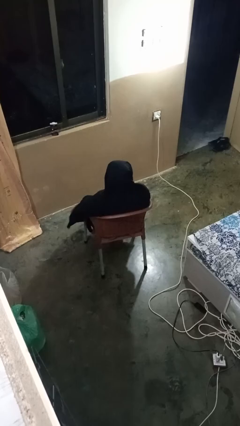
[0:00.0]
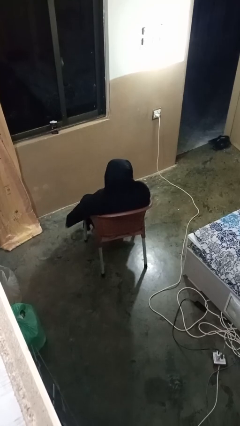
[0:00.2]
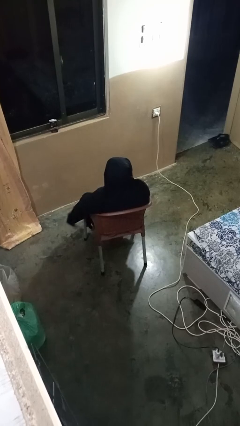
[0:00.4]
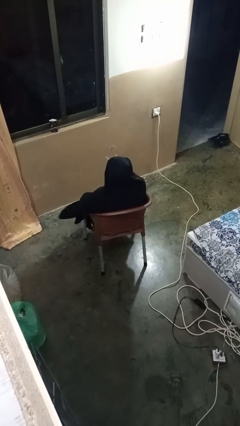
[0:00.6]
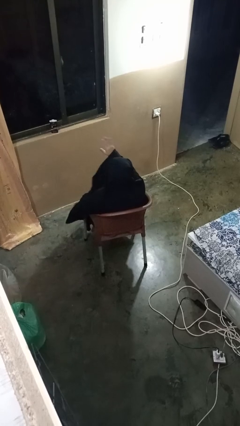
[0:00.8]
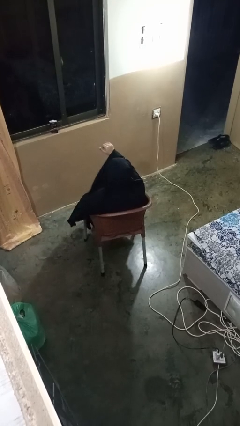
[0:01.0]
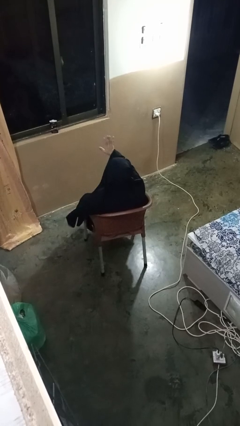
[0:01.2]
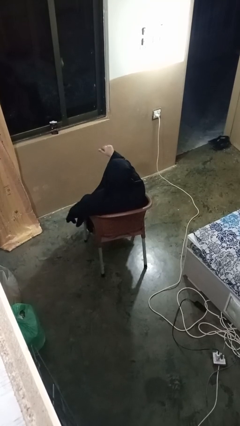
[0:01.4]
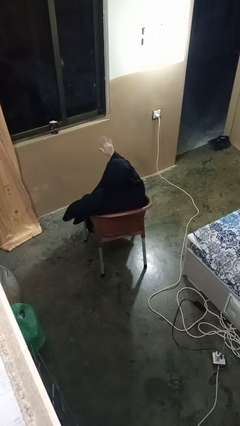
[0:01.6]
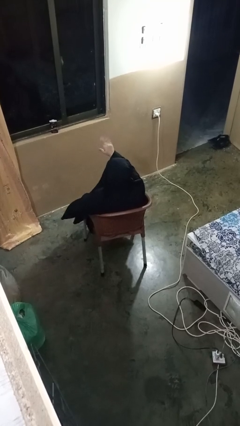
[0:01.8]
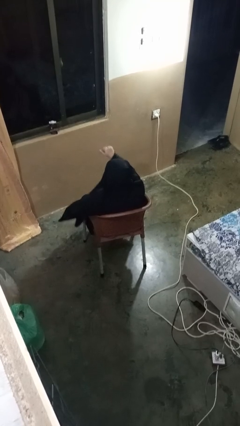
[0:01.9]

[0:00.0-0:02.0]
person gestures come here

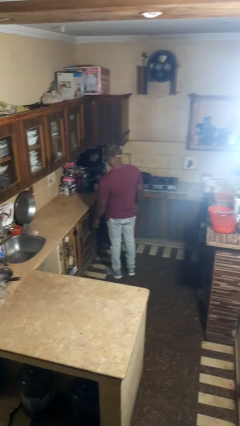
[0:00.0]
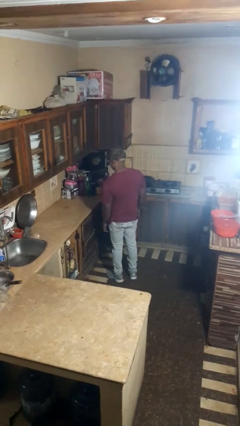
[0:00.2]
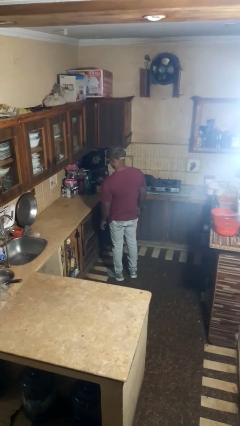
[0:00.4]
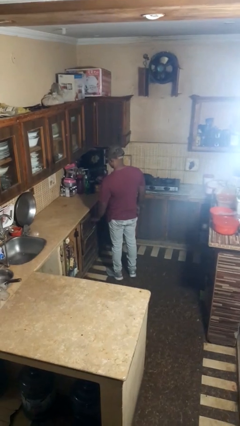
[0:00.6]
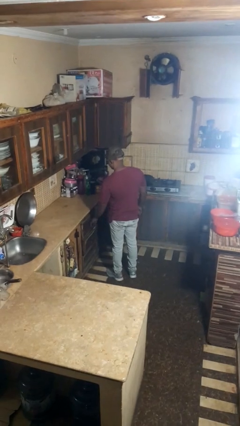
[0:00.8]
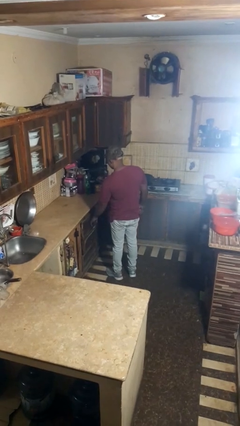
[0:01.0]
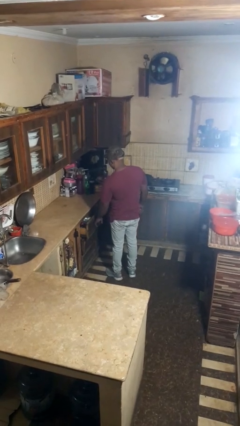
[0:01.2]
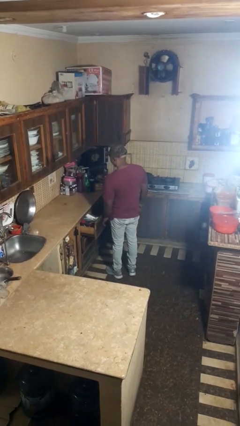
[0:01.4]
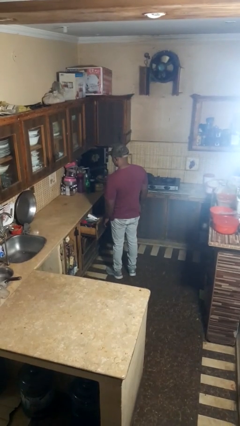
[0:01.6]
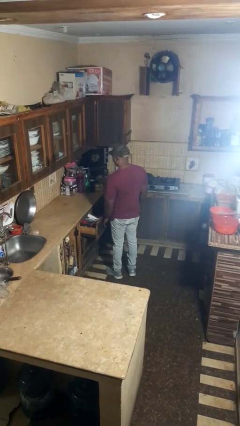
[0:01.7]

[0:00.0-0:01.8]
person opens kitchen drawer

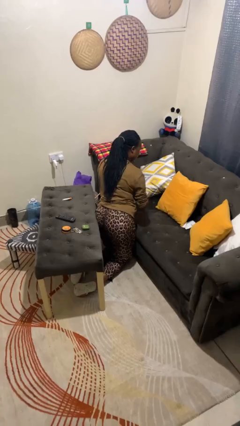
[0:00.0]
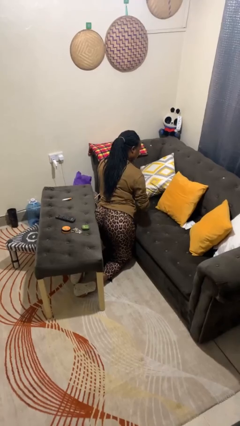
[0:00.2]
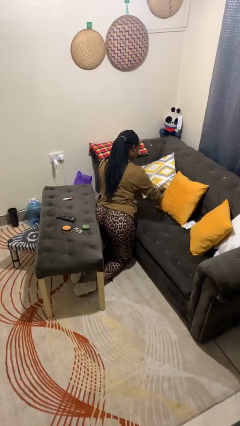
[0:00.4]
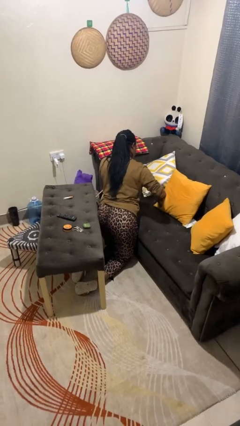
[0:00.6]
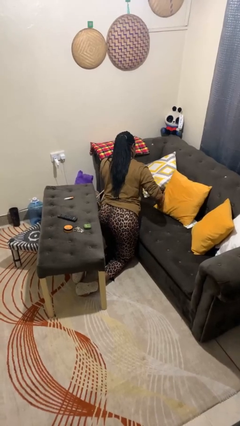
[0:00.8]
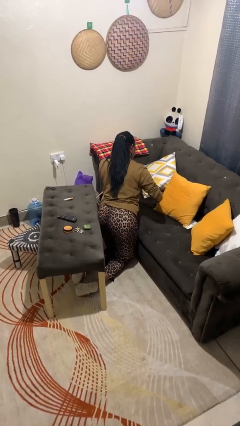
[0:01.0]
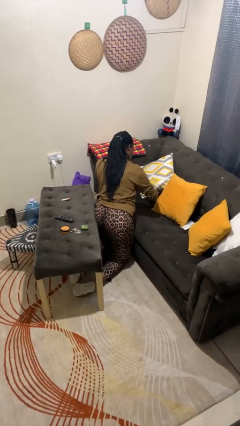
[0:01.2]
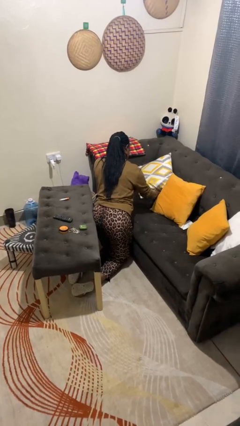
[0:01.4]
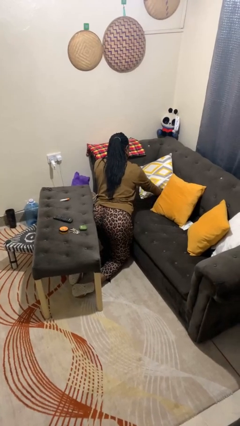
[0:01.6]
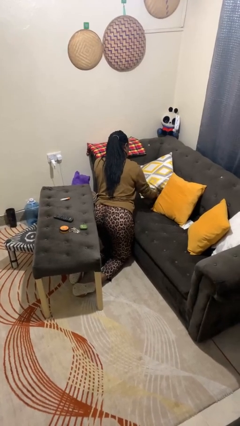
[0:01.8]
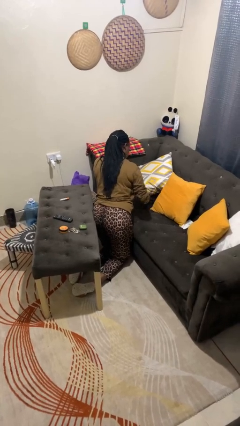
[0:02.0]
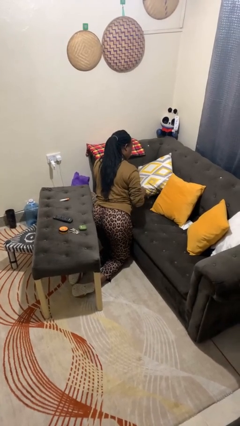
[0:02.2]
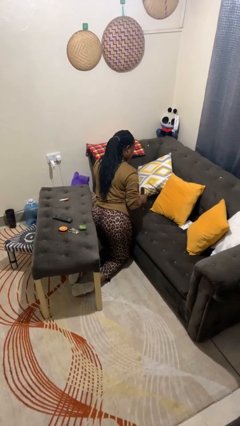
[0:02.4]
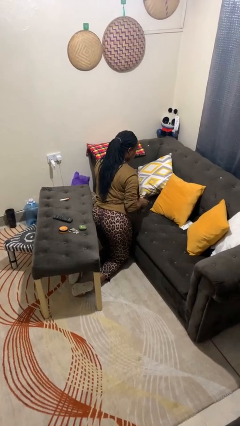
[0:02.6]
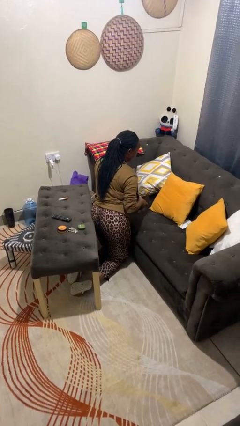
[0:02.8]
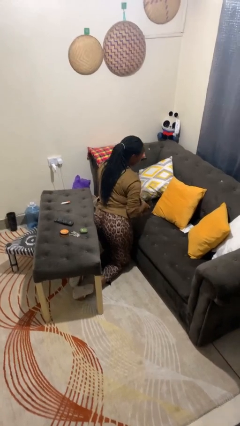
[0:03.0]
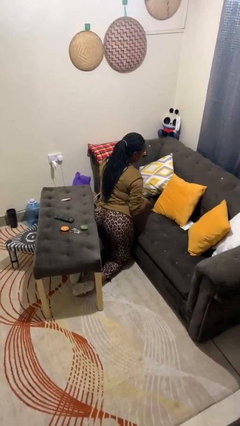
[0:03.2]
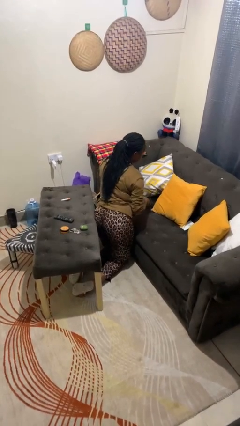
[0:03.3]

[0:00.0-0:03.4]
person searches in couch

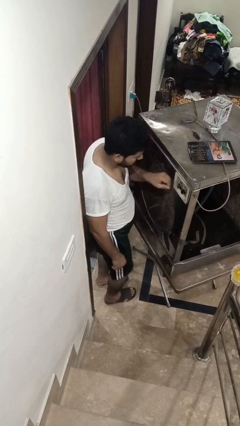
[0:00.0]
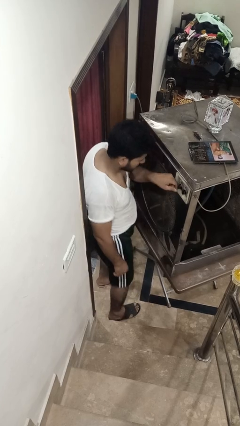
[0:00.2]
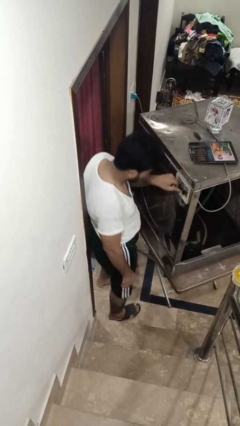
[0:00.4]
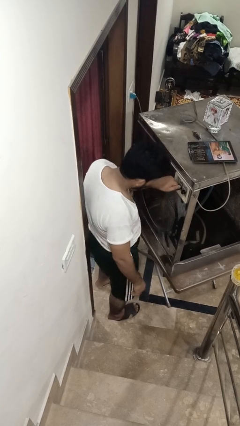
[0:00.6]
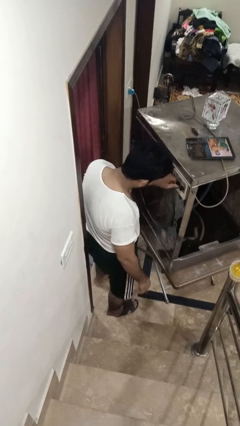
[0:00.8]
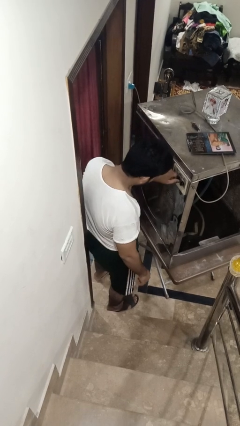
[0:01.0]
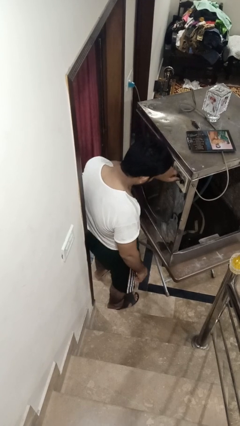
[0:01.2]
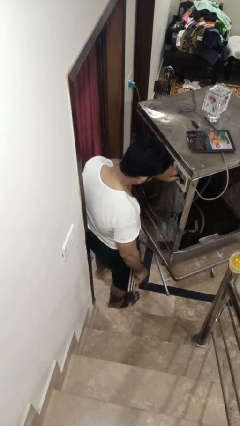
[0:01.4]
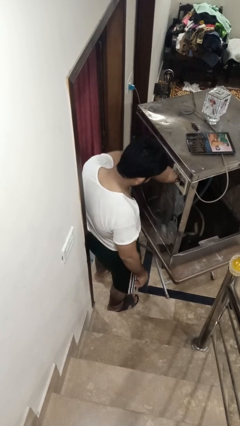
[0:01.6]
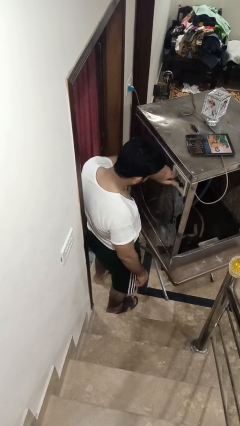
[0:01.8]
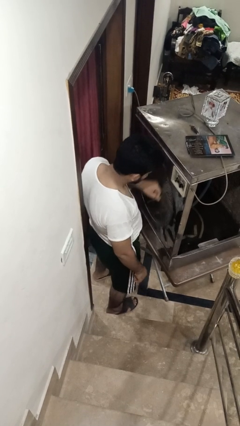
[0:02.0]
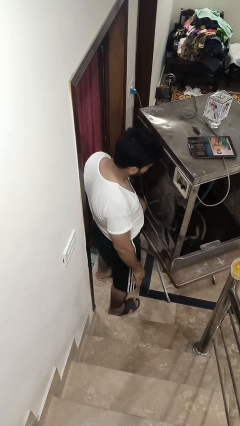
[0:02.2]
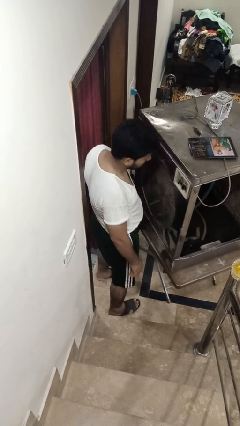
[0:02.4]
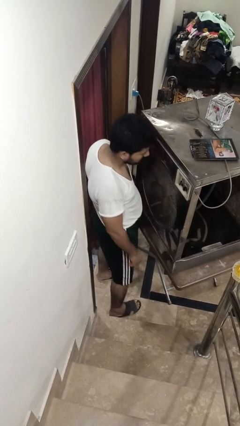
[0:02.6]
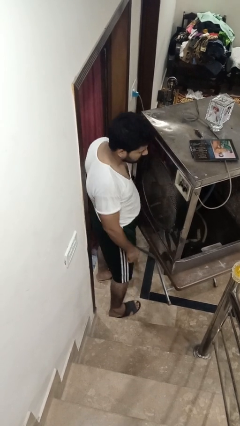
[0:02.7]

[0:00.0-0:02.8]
person adjusts thermostat

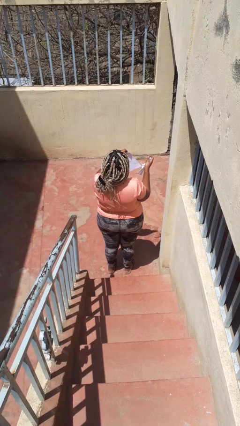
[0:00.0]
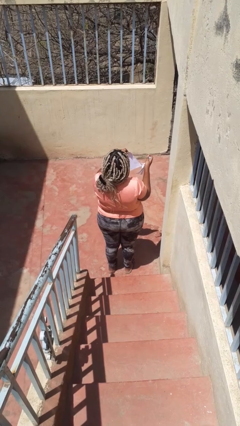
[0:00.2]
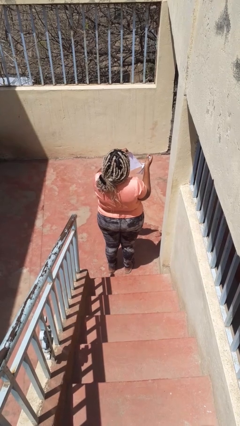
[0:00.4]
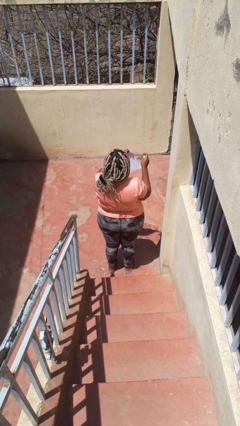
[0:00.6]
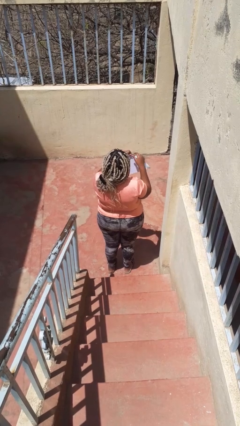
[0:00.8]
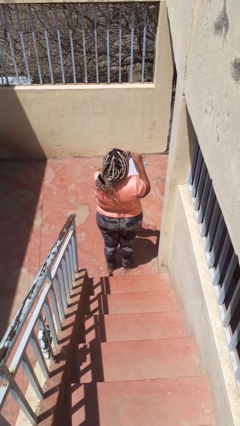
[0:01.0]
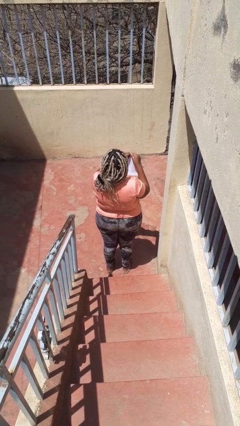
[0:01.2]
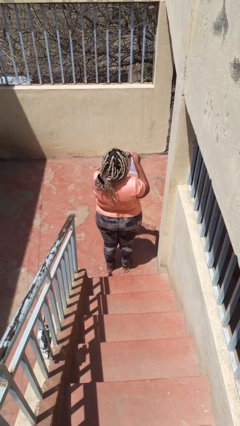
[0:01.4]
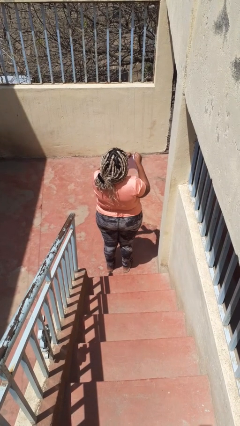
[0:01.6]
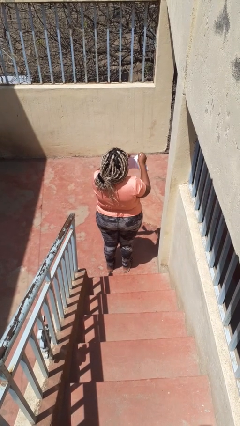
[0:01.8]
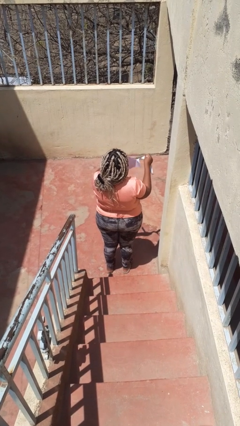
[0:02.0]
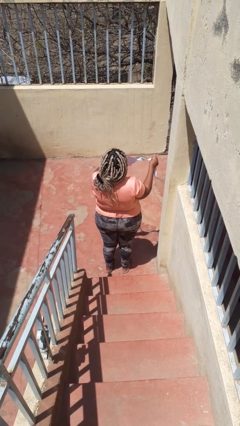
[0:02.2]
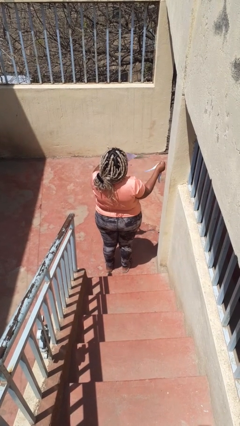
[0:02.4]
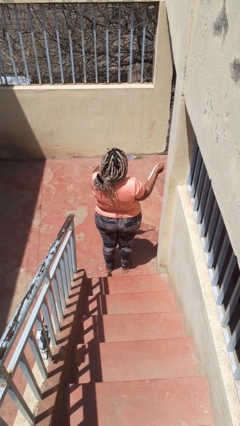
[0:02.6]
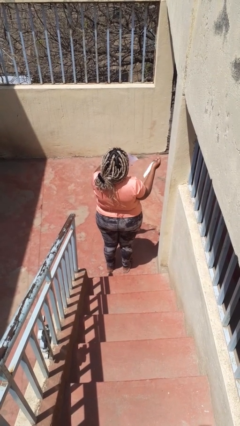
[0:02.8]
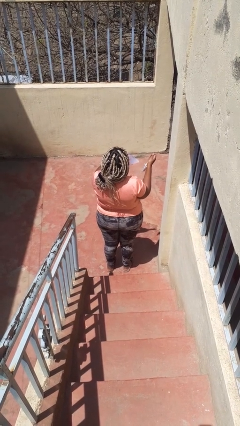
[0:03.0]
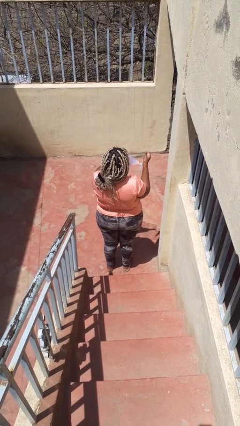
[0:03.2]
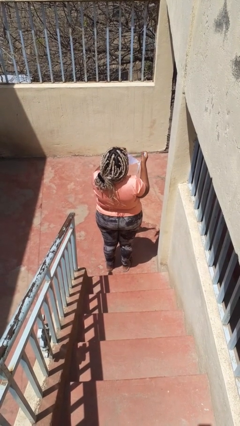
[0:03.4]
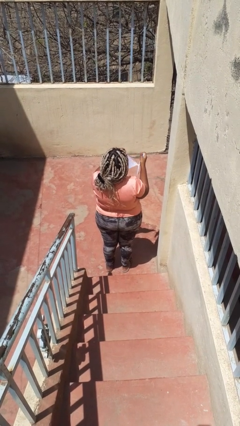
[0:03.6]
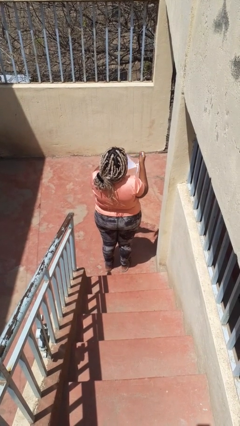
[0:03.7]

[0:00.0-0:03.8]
person tears paper

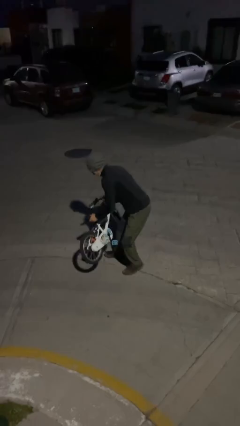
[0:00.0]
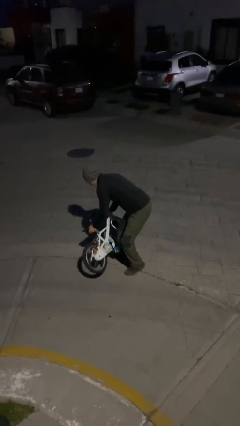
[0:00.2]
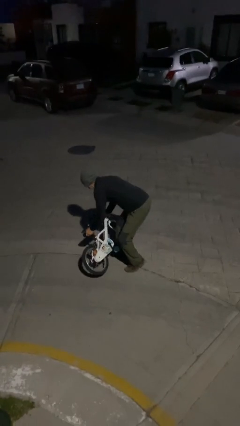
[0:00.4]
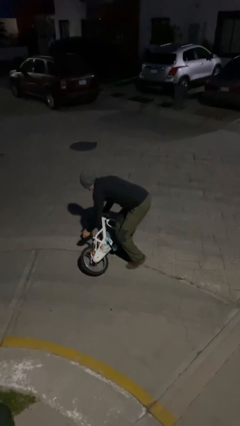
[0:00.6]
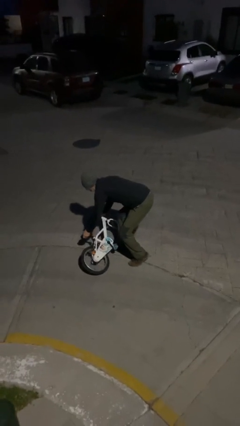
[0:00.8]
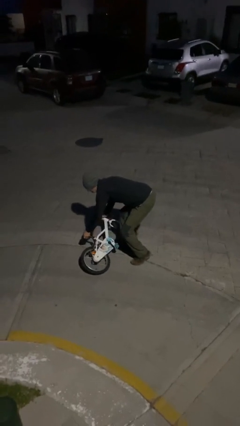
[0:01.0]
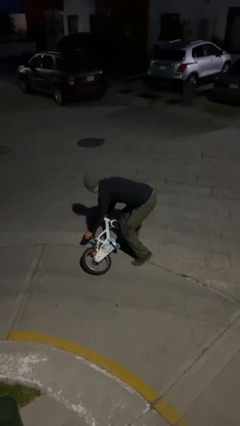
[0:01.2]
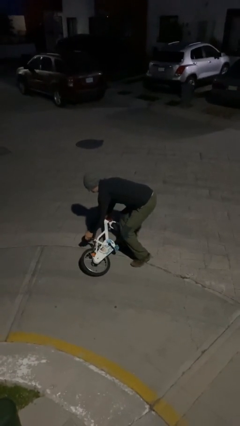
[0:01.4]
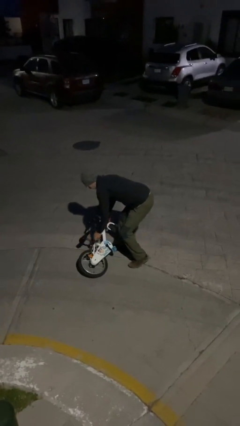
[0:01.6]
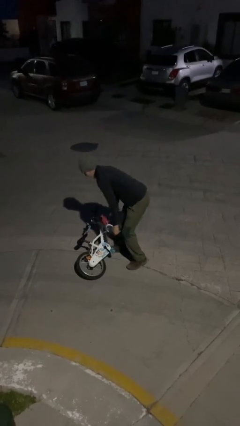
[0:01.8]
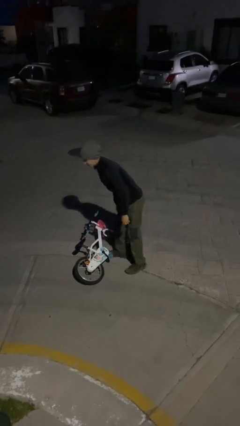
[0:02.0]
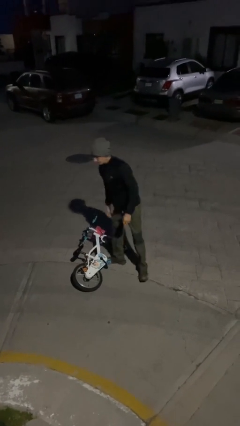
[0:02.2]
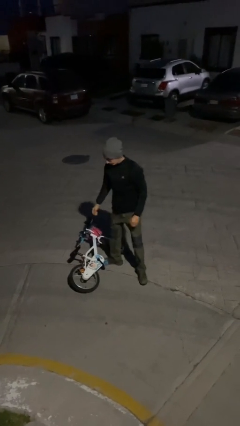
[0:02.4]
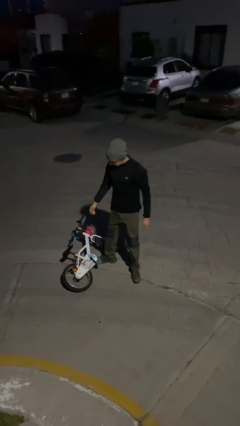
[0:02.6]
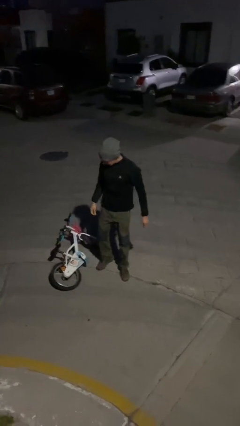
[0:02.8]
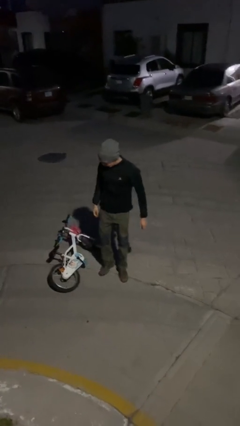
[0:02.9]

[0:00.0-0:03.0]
person puts down object on floor

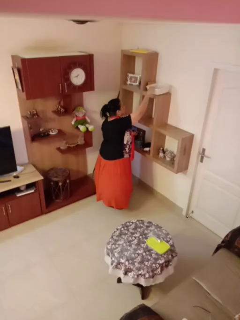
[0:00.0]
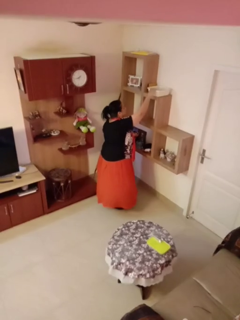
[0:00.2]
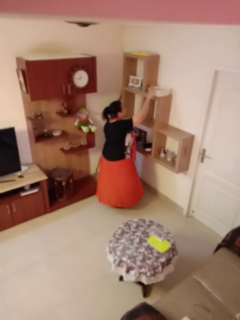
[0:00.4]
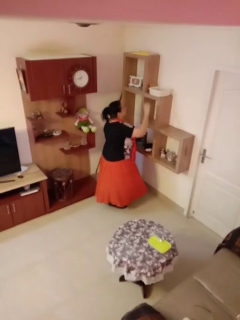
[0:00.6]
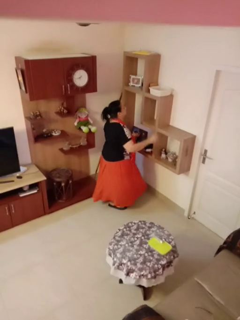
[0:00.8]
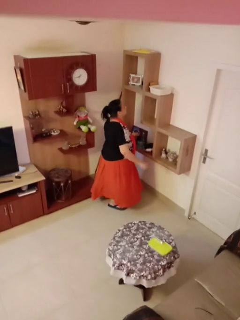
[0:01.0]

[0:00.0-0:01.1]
person puts down object on shelf
